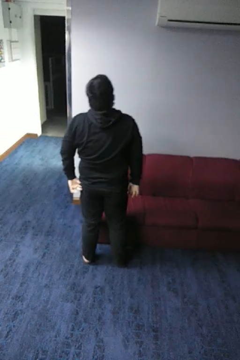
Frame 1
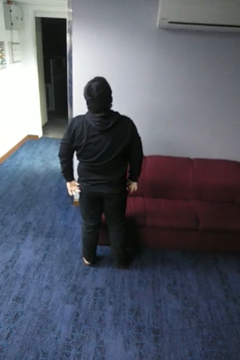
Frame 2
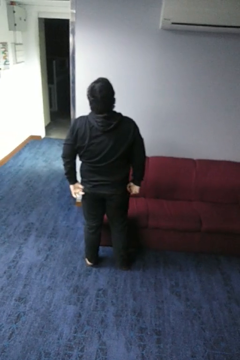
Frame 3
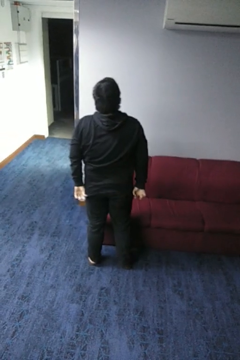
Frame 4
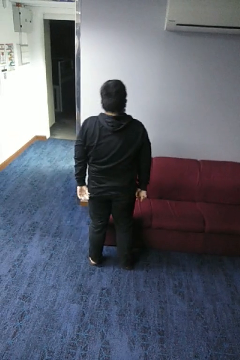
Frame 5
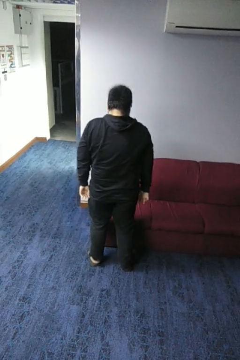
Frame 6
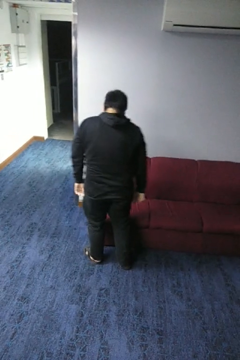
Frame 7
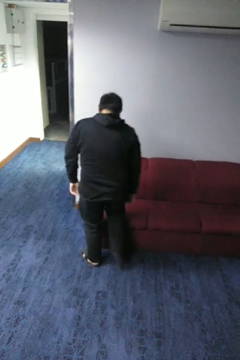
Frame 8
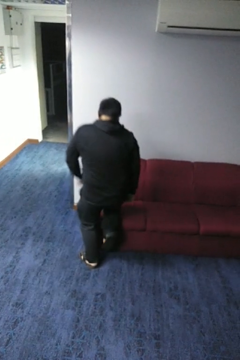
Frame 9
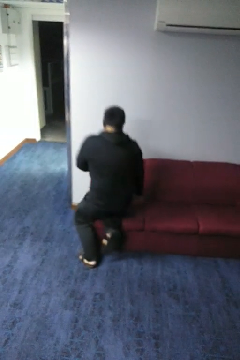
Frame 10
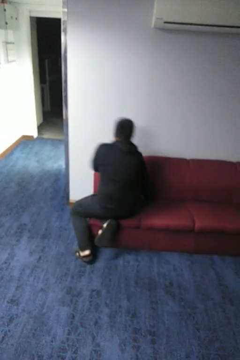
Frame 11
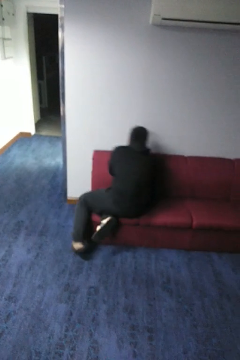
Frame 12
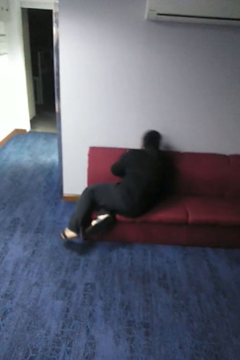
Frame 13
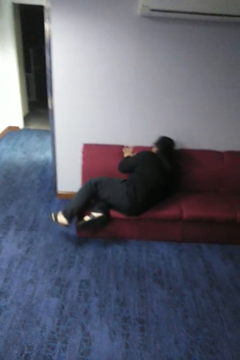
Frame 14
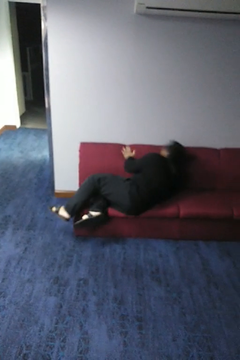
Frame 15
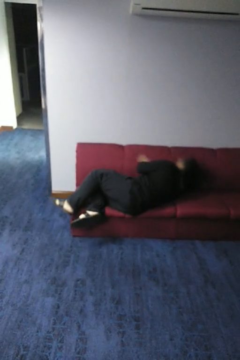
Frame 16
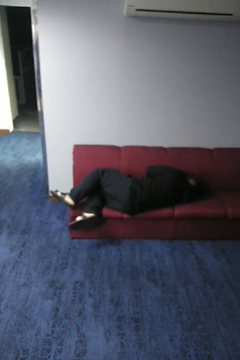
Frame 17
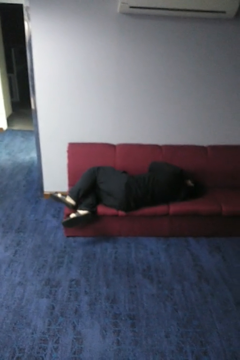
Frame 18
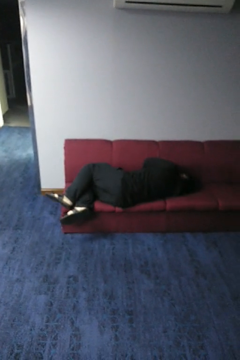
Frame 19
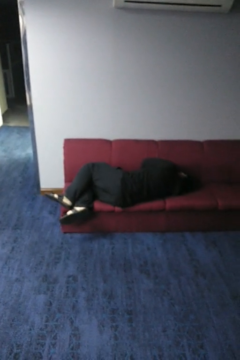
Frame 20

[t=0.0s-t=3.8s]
person lies down on couch

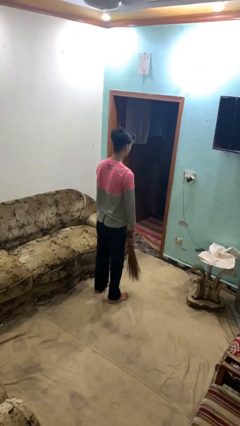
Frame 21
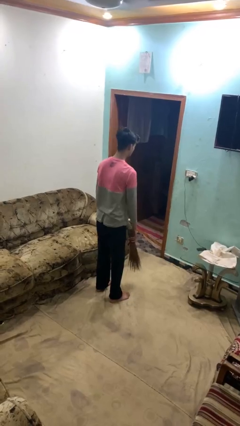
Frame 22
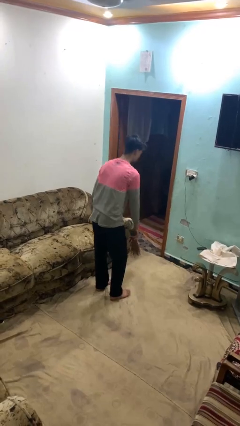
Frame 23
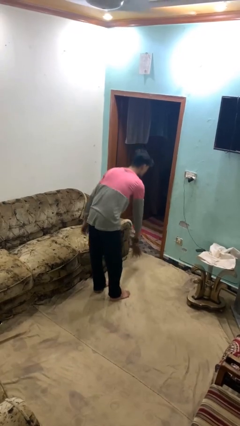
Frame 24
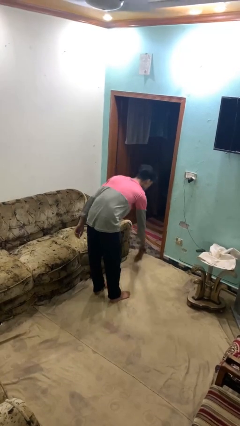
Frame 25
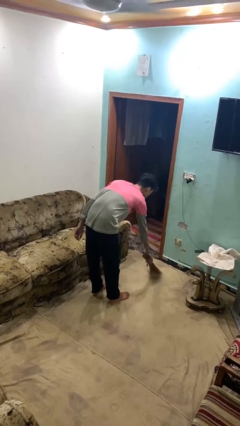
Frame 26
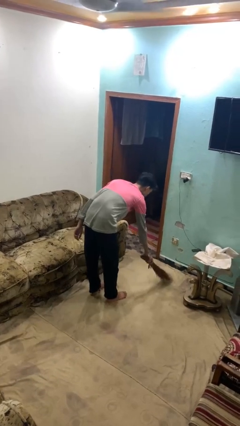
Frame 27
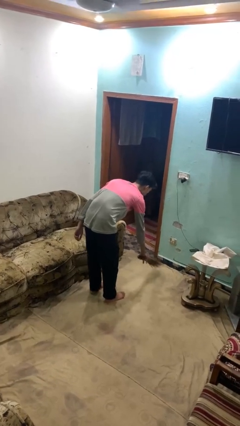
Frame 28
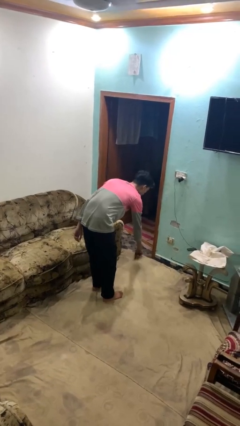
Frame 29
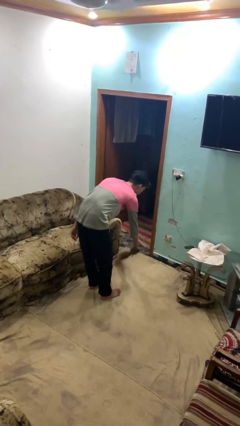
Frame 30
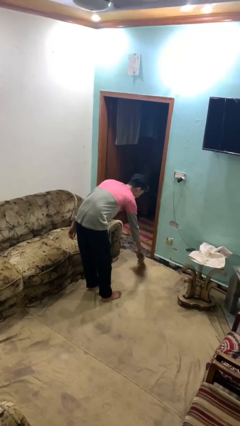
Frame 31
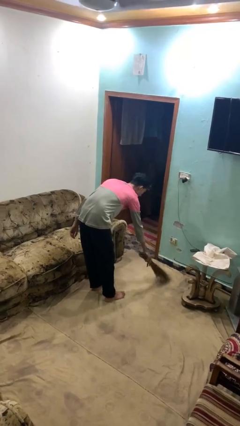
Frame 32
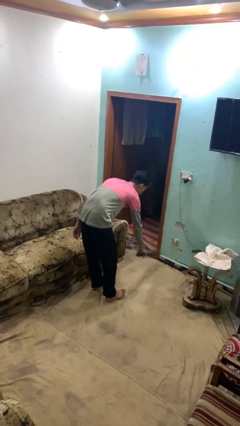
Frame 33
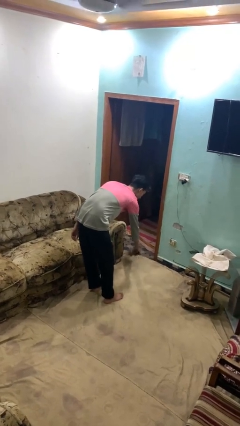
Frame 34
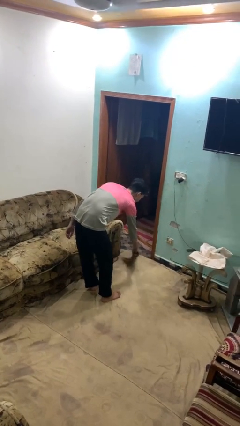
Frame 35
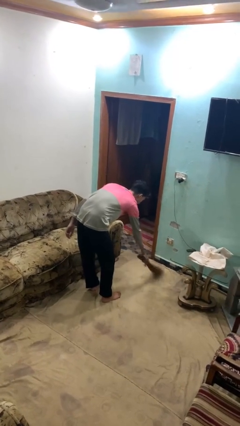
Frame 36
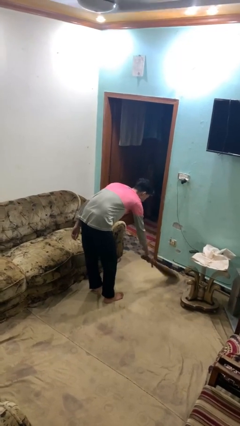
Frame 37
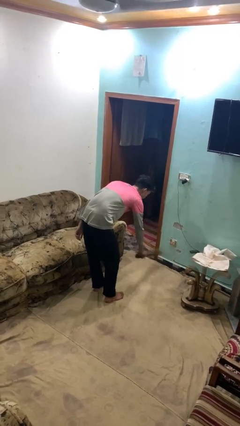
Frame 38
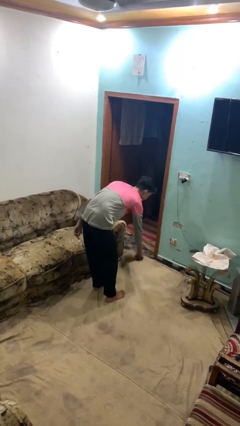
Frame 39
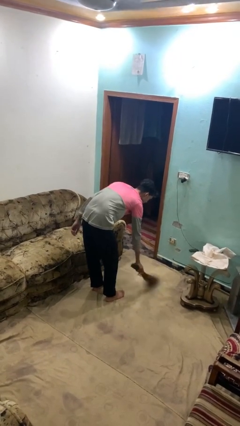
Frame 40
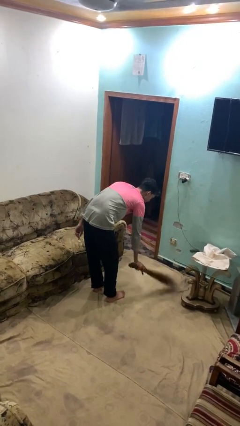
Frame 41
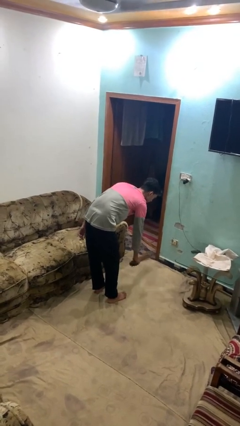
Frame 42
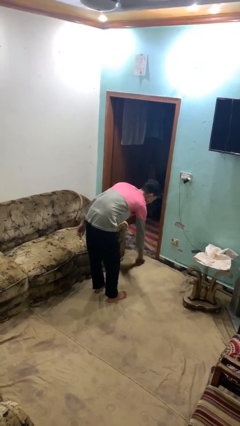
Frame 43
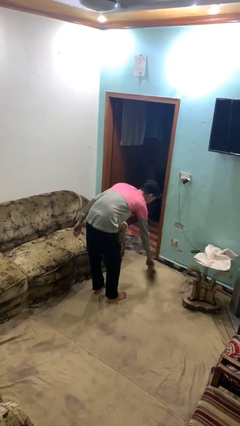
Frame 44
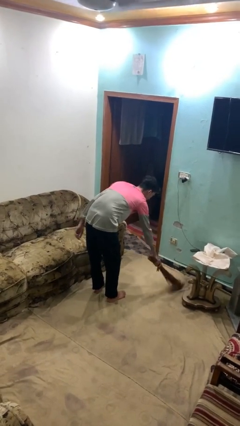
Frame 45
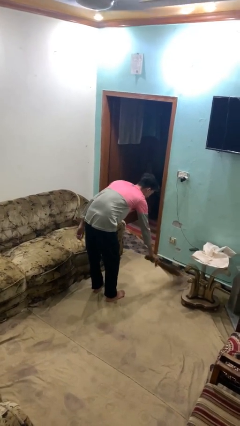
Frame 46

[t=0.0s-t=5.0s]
person sweeps floor

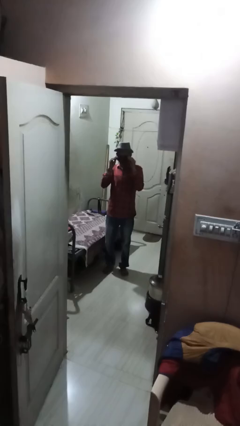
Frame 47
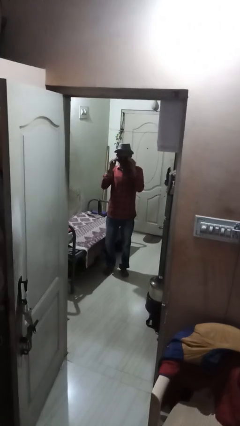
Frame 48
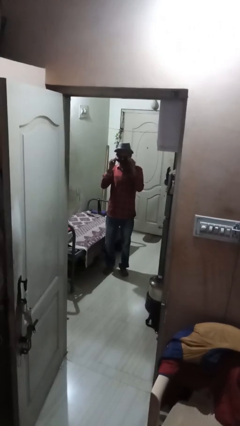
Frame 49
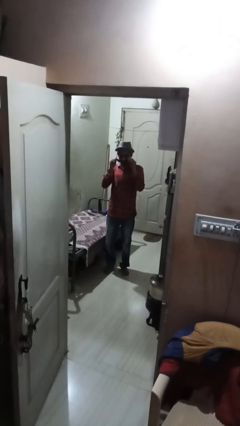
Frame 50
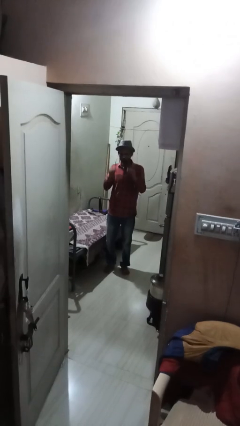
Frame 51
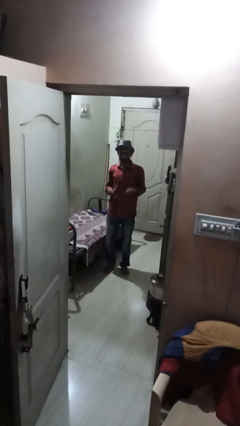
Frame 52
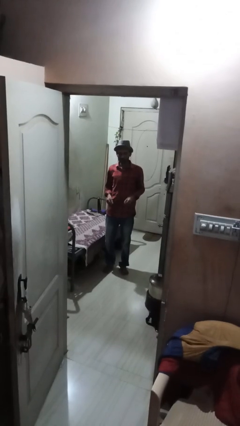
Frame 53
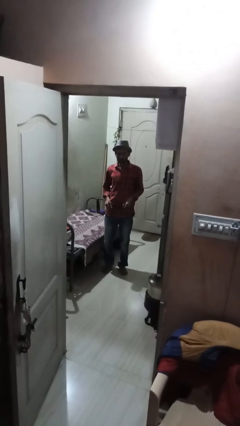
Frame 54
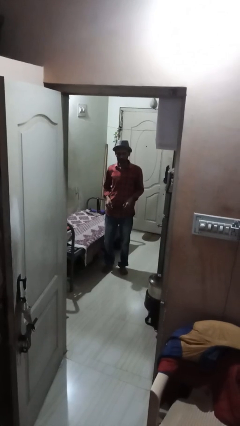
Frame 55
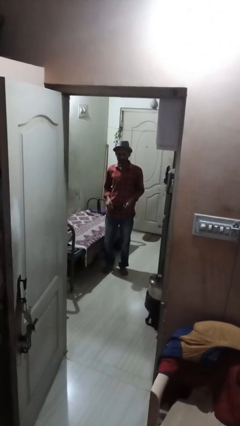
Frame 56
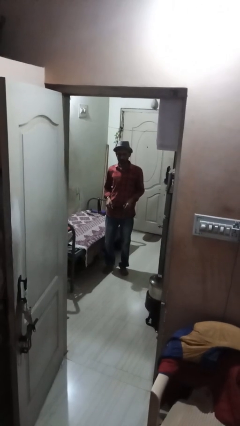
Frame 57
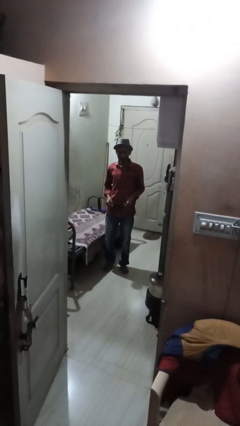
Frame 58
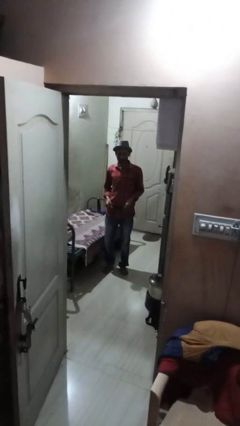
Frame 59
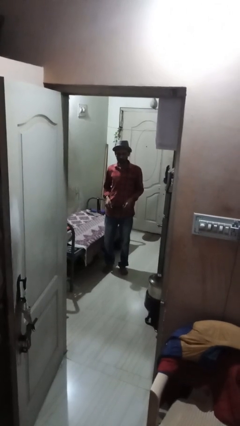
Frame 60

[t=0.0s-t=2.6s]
person takes off sunglasses

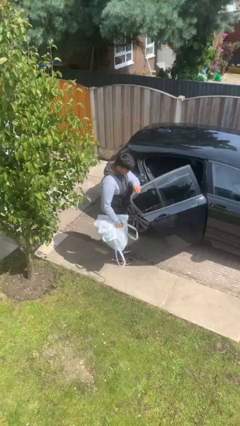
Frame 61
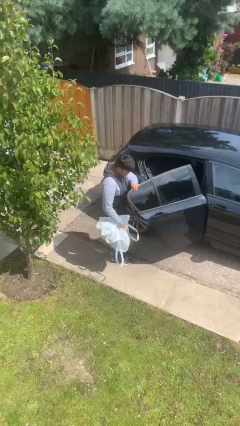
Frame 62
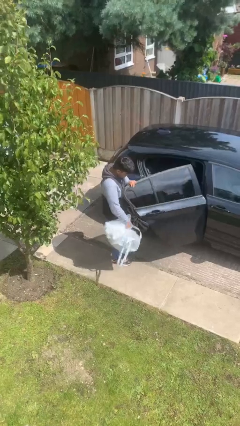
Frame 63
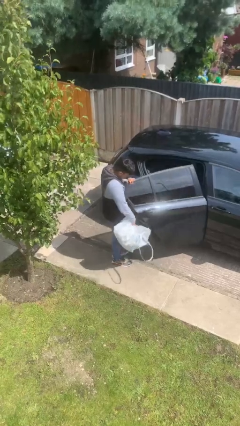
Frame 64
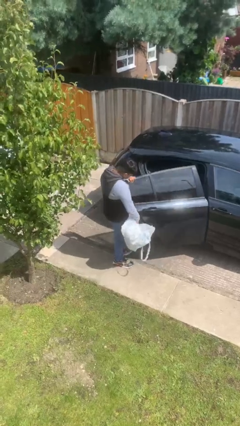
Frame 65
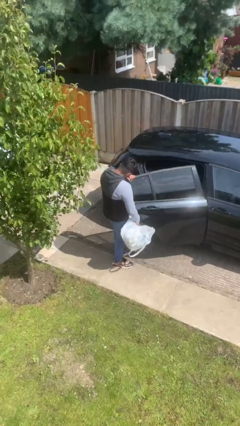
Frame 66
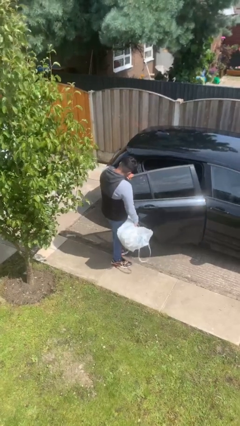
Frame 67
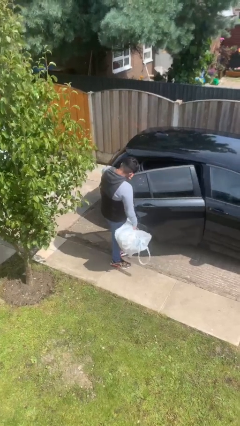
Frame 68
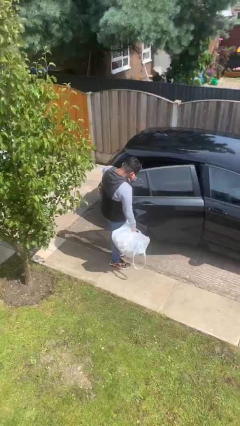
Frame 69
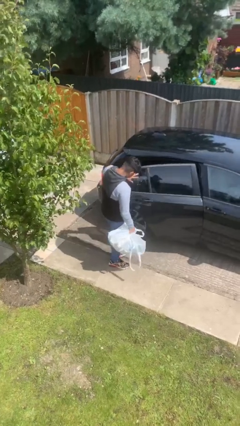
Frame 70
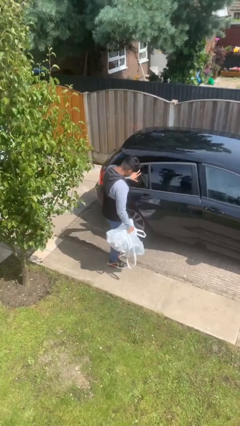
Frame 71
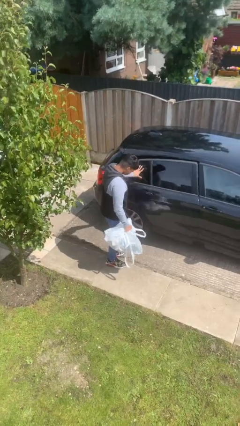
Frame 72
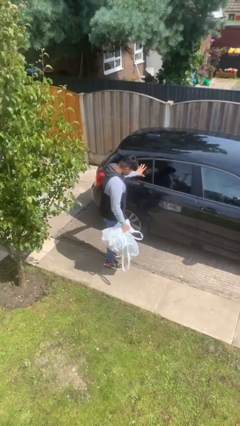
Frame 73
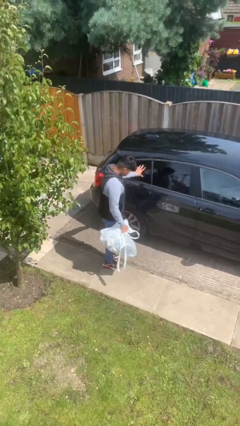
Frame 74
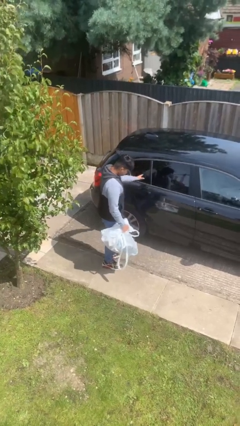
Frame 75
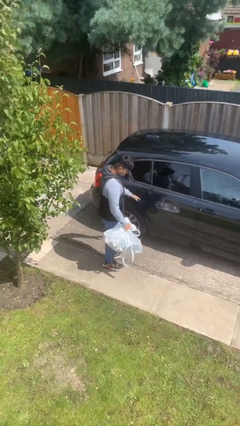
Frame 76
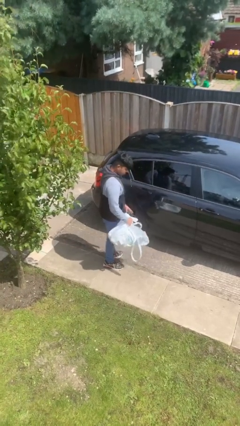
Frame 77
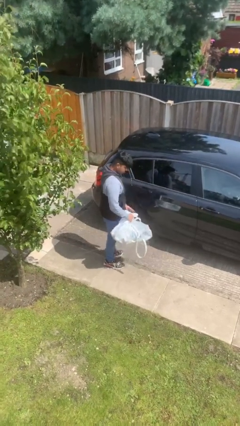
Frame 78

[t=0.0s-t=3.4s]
person closes car door

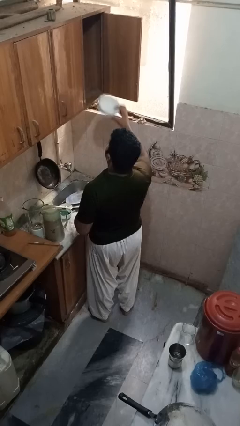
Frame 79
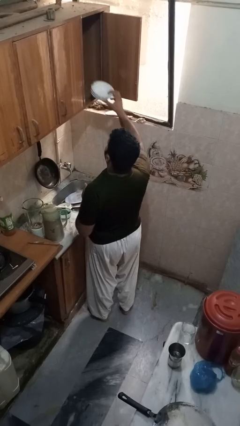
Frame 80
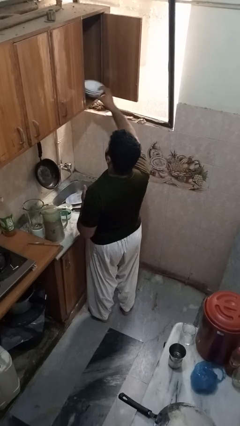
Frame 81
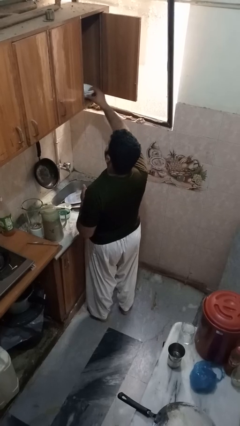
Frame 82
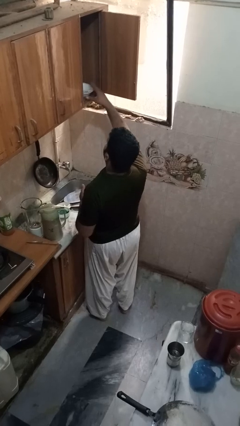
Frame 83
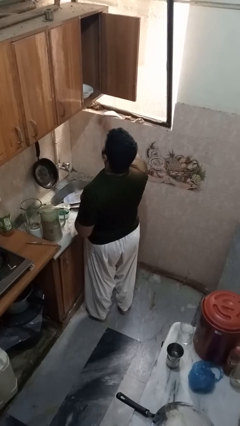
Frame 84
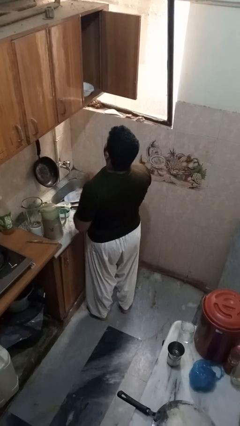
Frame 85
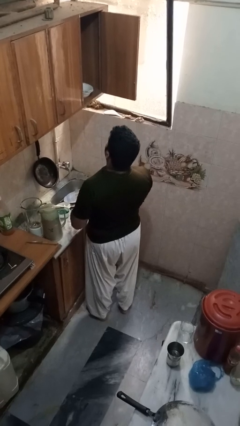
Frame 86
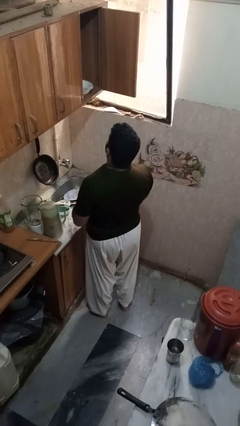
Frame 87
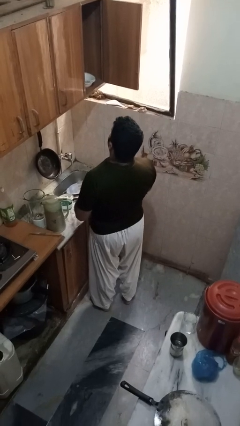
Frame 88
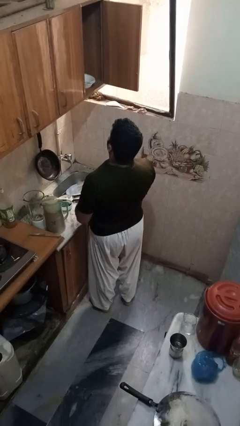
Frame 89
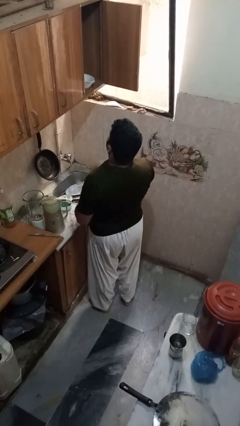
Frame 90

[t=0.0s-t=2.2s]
person puts object in cabinet

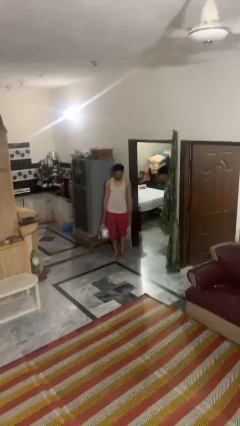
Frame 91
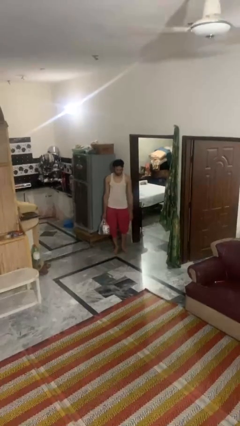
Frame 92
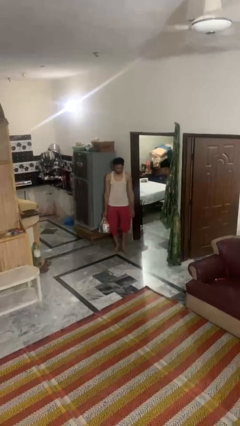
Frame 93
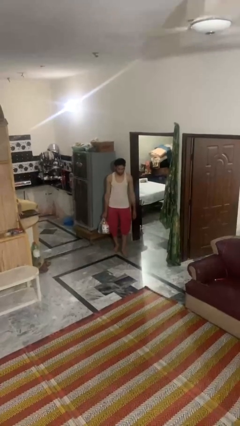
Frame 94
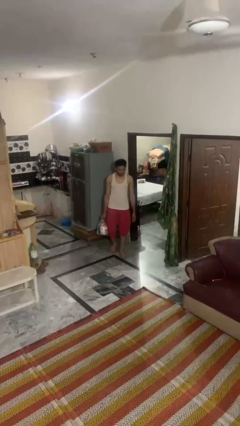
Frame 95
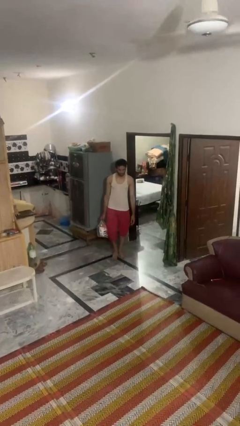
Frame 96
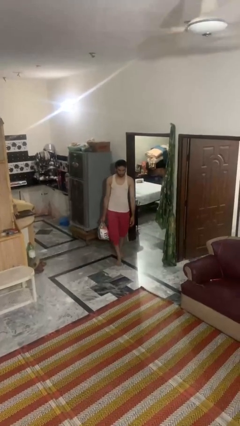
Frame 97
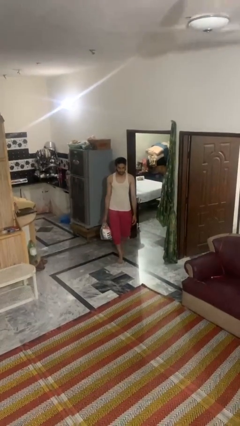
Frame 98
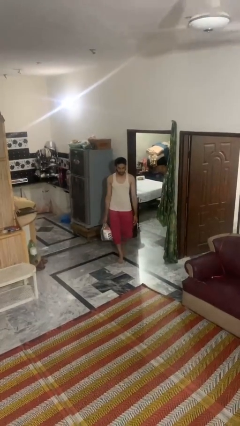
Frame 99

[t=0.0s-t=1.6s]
person carries groceries
